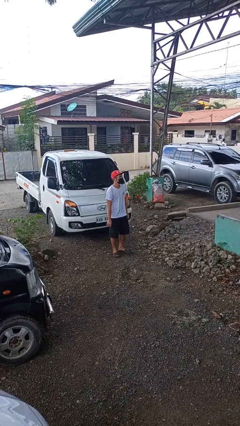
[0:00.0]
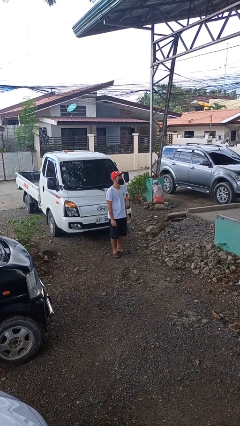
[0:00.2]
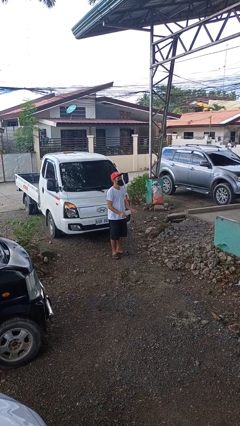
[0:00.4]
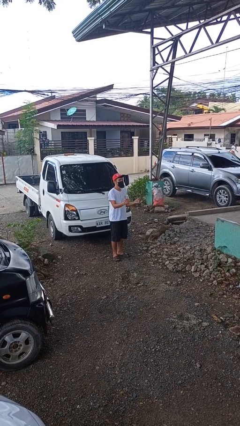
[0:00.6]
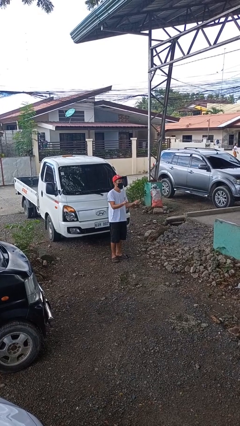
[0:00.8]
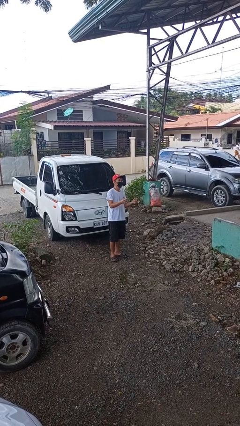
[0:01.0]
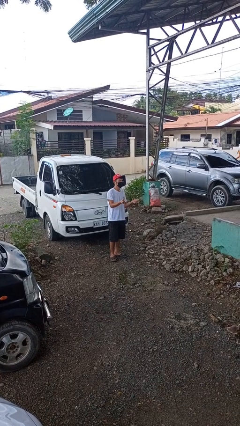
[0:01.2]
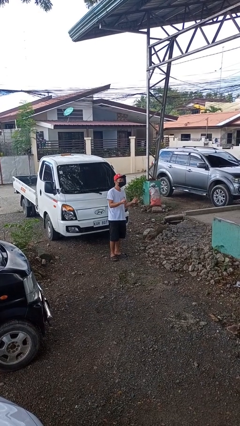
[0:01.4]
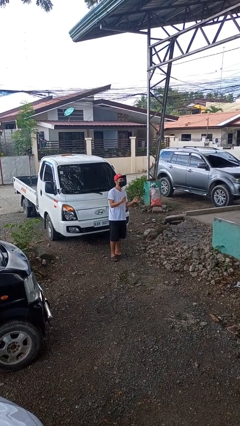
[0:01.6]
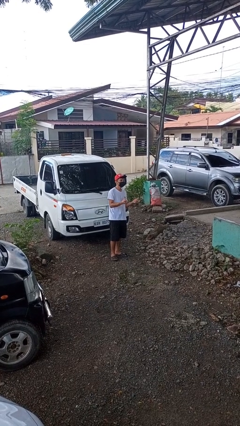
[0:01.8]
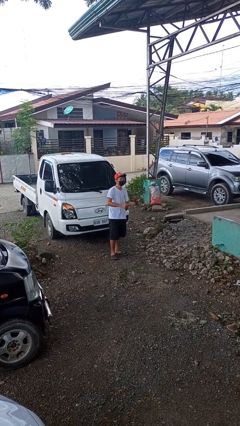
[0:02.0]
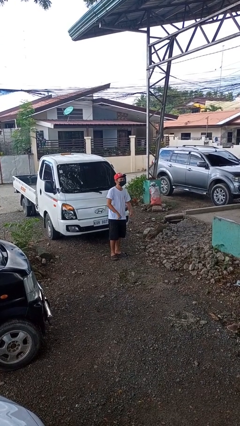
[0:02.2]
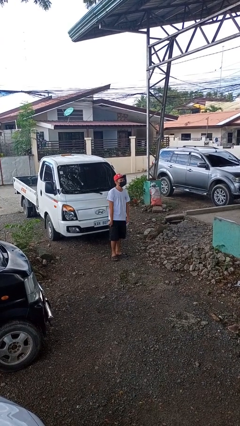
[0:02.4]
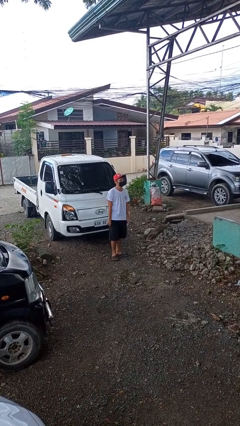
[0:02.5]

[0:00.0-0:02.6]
person snaps fingers

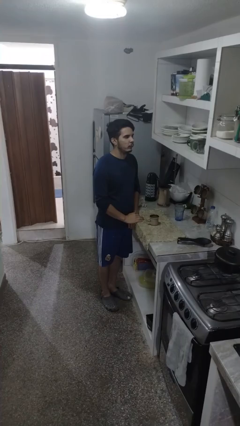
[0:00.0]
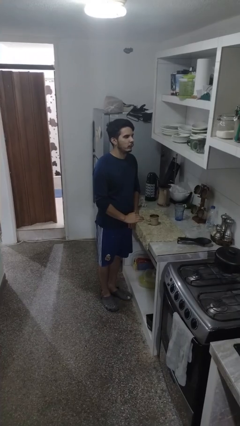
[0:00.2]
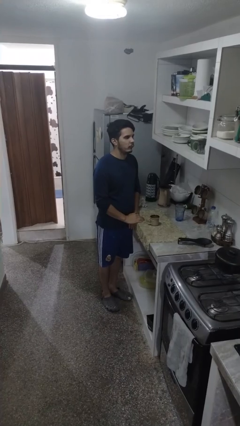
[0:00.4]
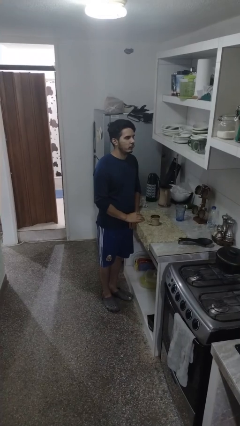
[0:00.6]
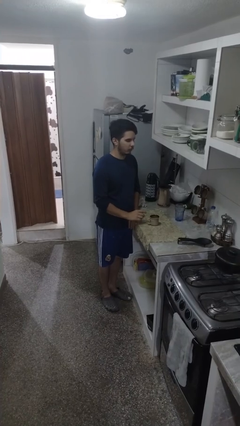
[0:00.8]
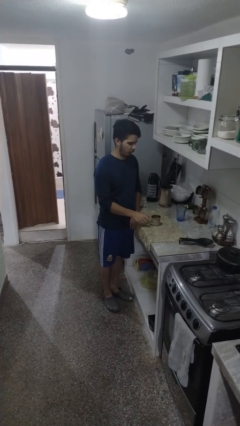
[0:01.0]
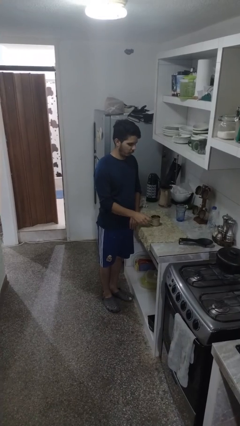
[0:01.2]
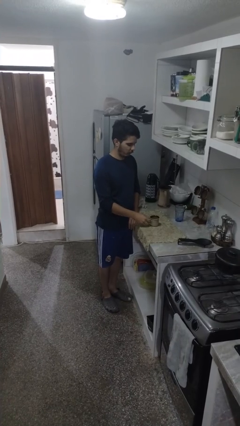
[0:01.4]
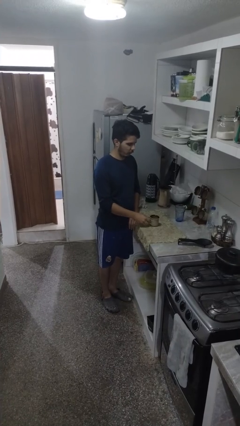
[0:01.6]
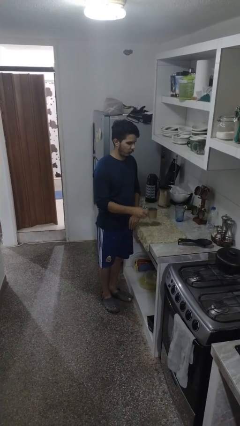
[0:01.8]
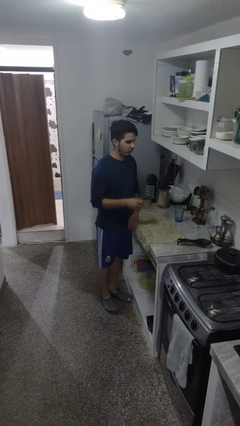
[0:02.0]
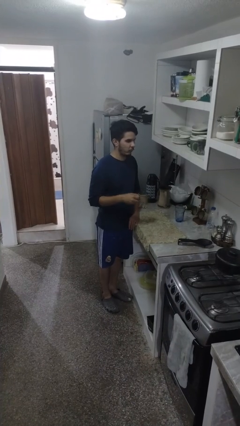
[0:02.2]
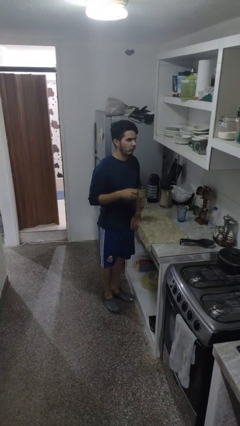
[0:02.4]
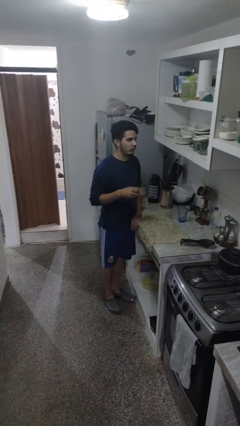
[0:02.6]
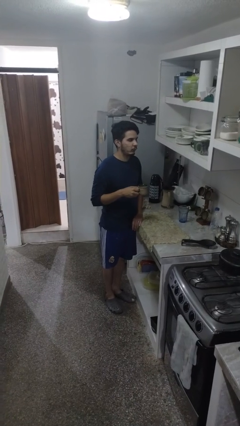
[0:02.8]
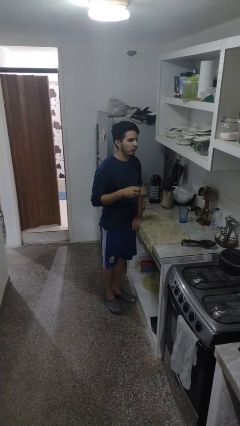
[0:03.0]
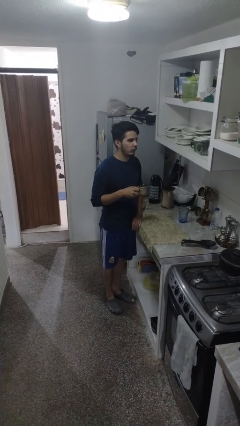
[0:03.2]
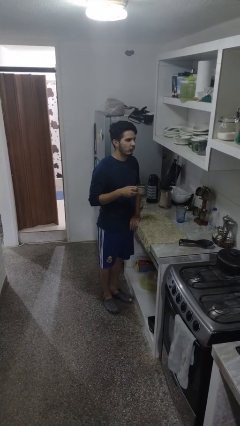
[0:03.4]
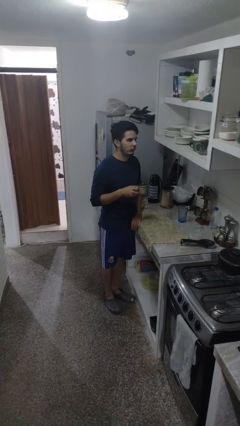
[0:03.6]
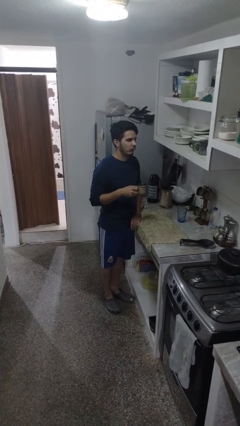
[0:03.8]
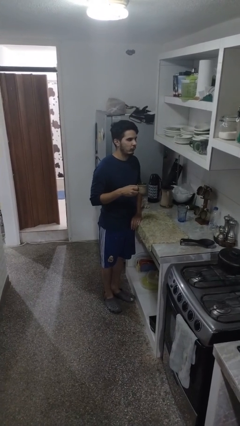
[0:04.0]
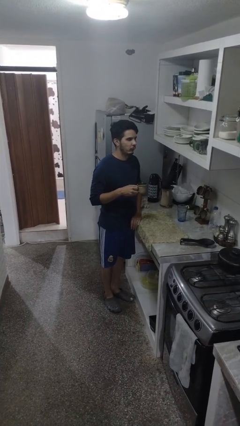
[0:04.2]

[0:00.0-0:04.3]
person picks up object from table

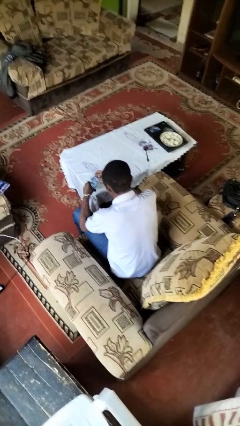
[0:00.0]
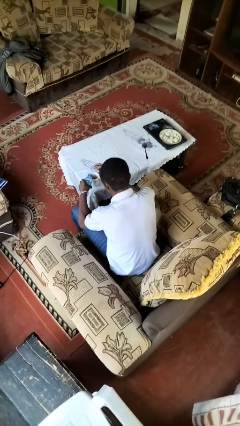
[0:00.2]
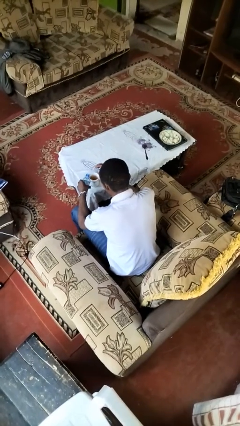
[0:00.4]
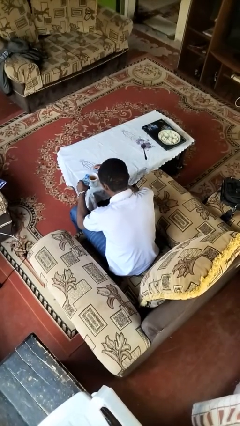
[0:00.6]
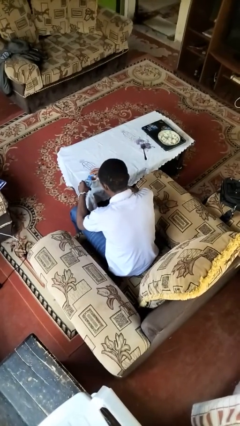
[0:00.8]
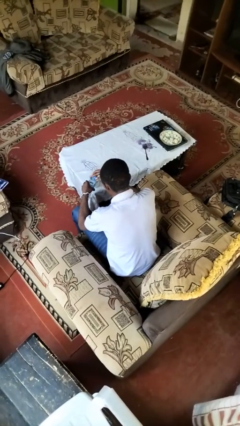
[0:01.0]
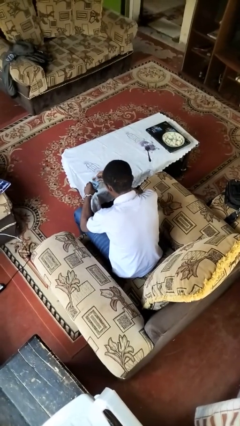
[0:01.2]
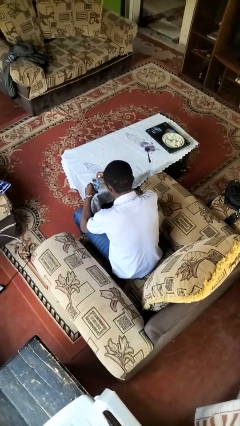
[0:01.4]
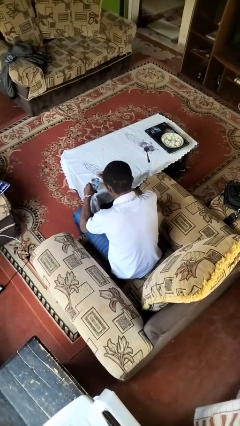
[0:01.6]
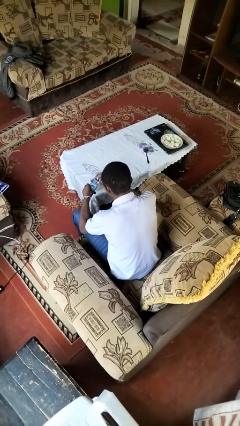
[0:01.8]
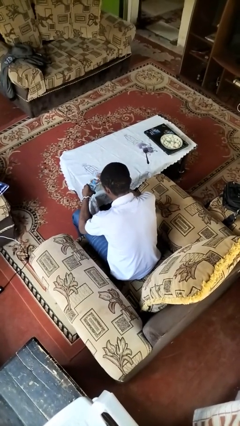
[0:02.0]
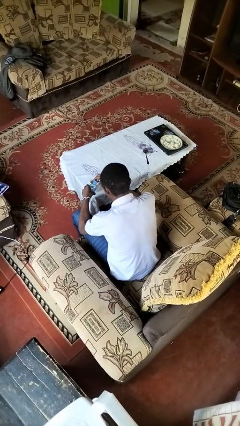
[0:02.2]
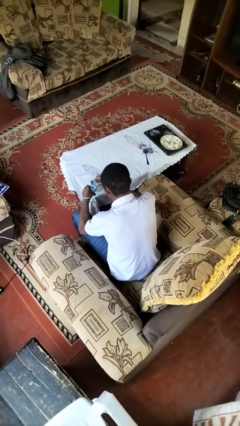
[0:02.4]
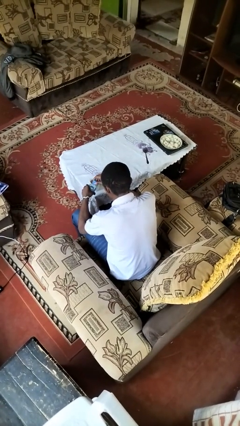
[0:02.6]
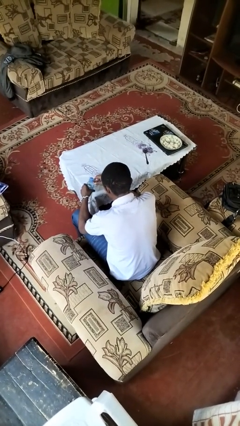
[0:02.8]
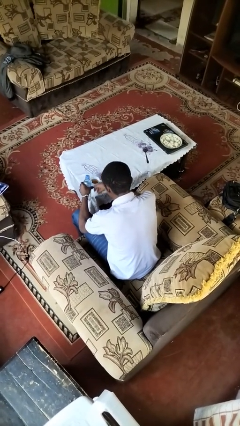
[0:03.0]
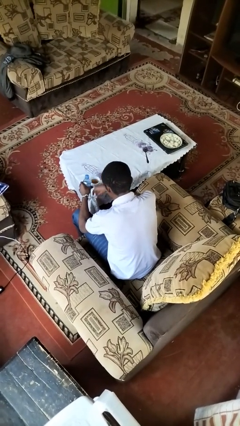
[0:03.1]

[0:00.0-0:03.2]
person screws lid to bottle

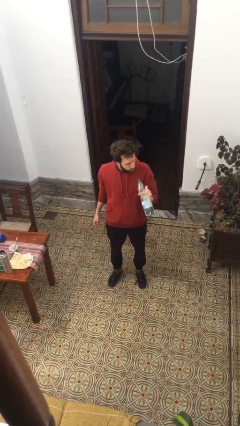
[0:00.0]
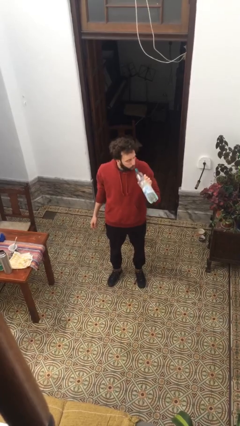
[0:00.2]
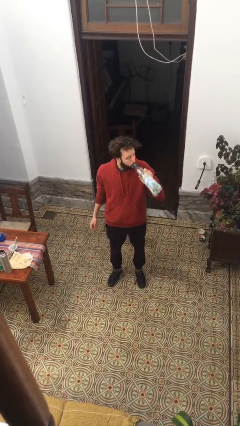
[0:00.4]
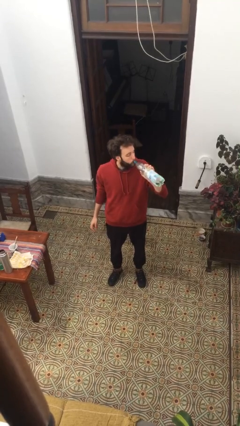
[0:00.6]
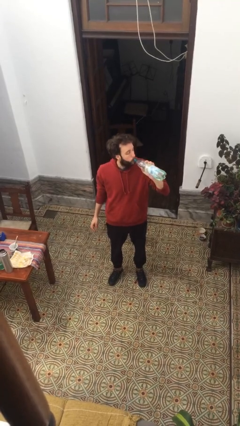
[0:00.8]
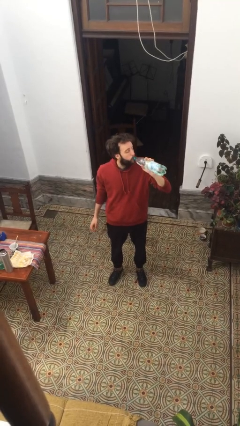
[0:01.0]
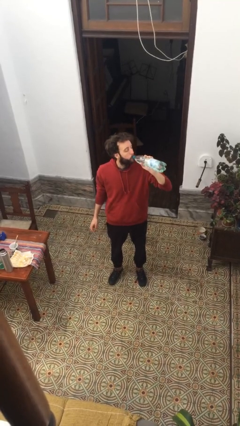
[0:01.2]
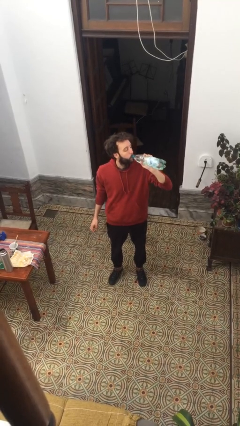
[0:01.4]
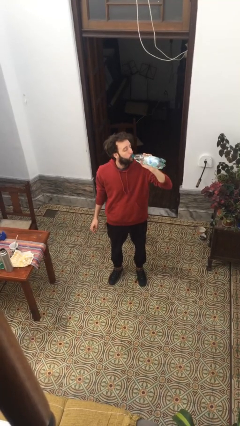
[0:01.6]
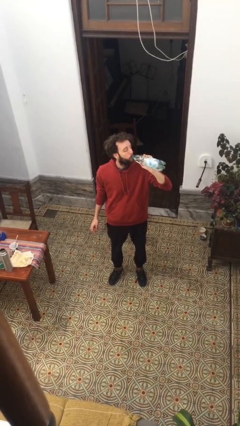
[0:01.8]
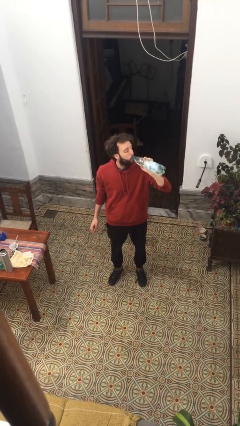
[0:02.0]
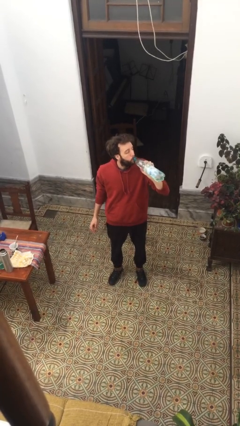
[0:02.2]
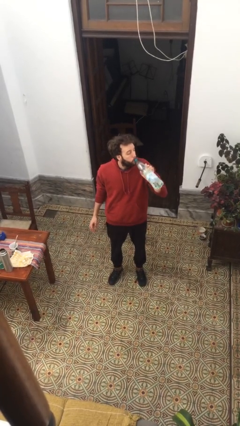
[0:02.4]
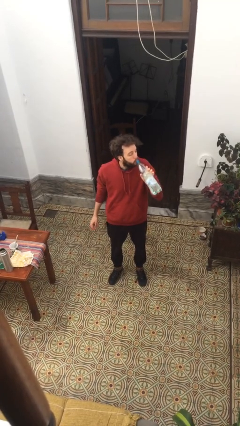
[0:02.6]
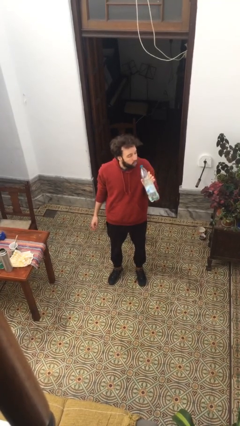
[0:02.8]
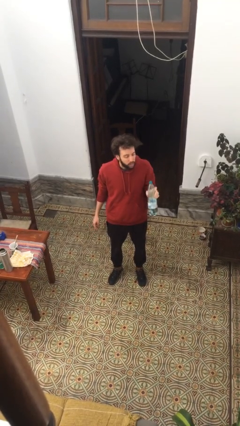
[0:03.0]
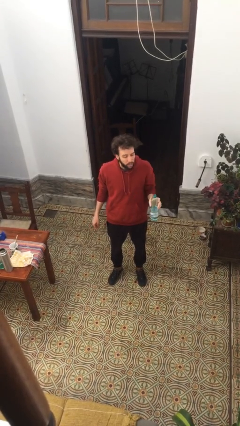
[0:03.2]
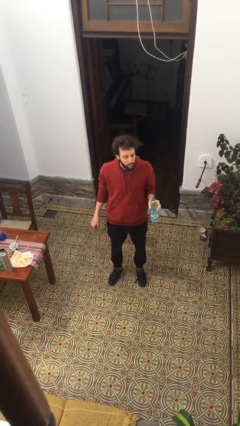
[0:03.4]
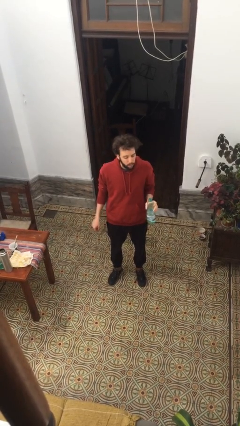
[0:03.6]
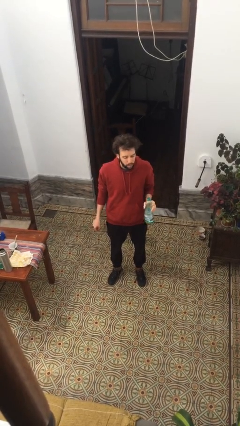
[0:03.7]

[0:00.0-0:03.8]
person drinks from bottle

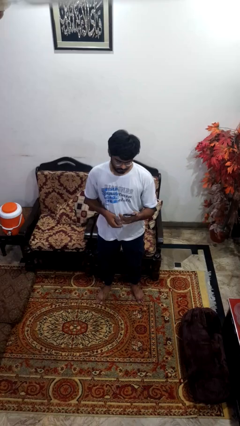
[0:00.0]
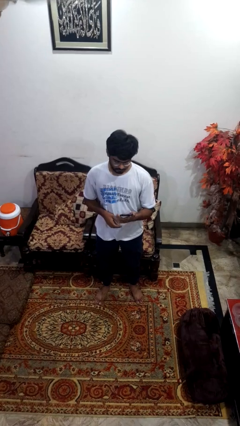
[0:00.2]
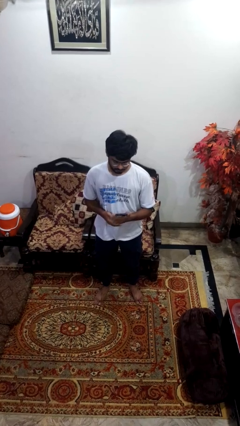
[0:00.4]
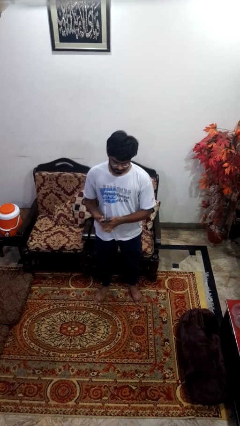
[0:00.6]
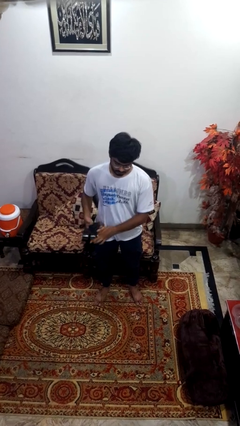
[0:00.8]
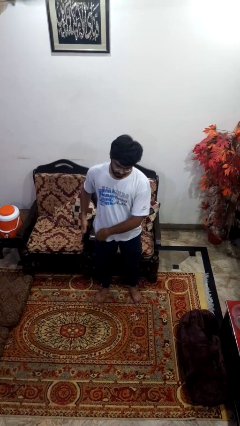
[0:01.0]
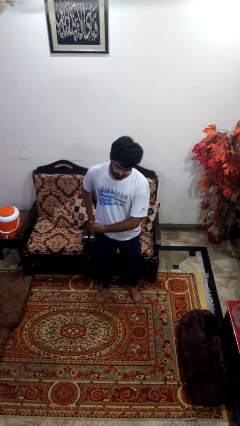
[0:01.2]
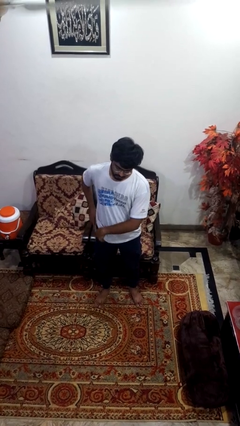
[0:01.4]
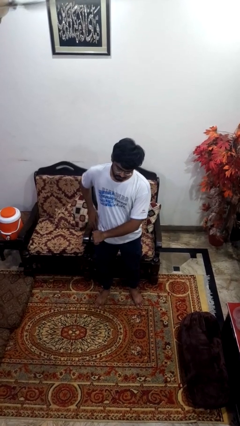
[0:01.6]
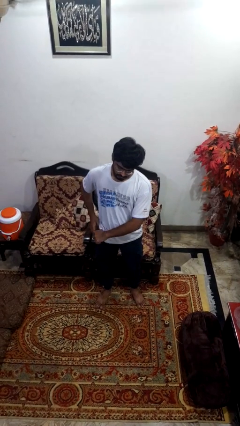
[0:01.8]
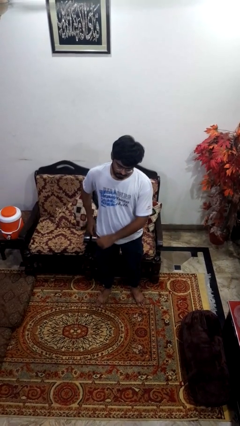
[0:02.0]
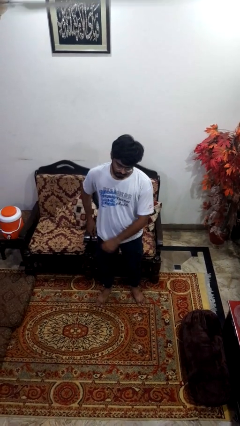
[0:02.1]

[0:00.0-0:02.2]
person puts phone into pocket

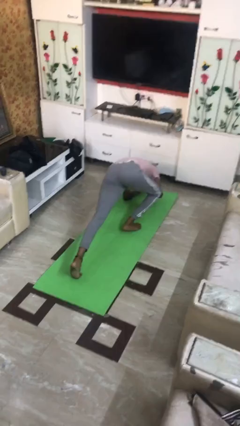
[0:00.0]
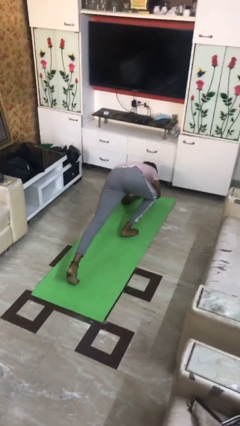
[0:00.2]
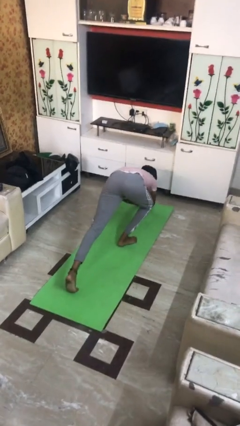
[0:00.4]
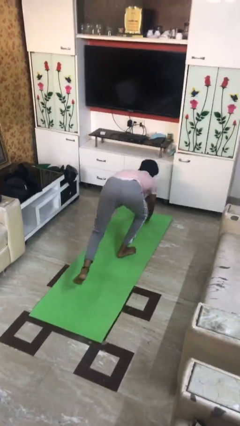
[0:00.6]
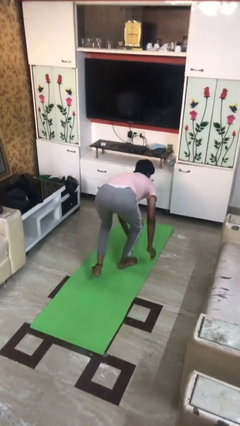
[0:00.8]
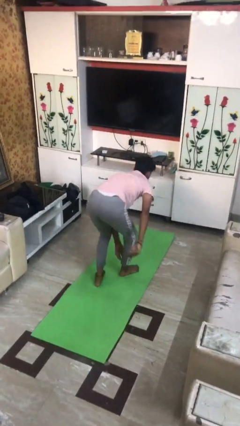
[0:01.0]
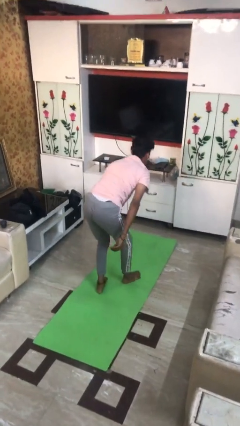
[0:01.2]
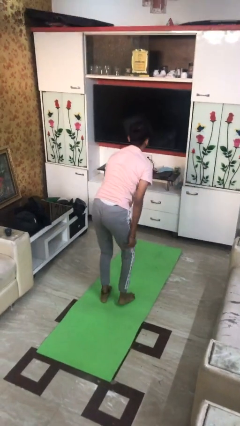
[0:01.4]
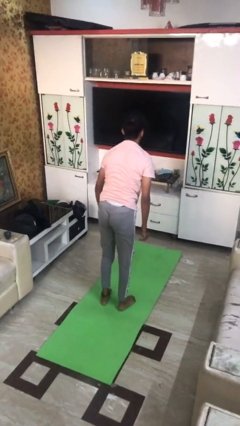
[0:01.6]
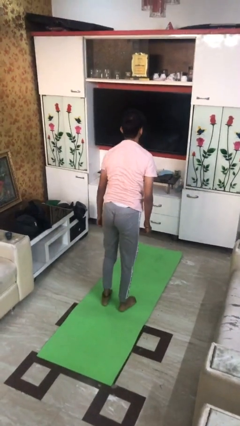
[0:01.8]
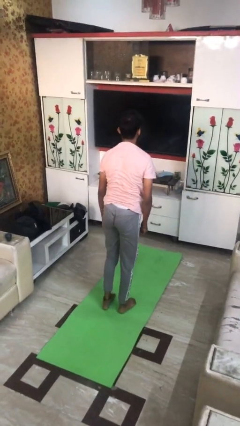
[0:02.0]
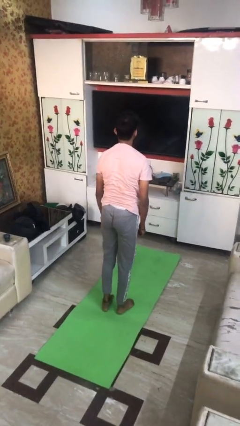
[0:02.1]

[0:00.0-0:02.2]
person stands up from floor
